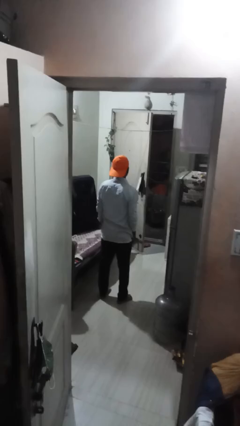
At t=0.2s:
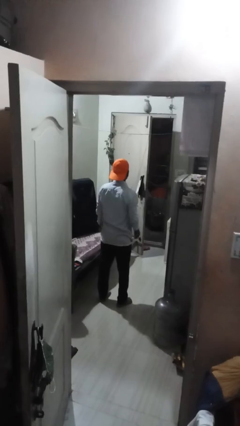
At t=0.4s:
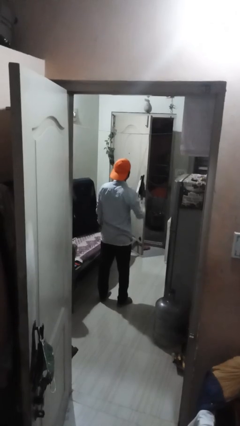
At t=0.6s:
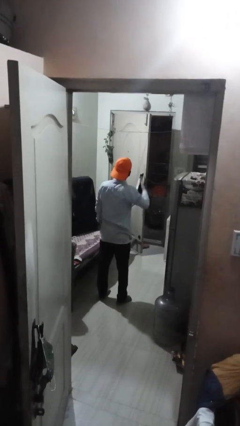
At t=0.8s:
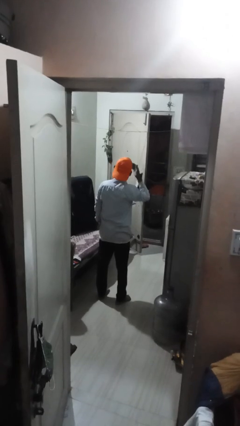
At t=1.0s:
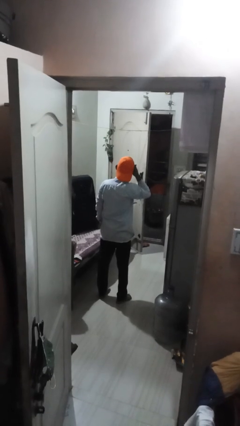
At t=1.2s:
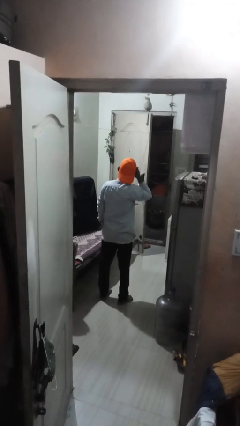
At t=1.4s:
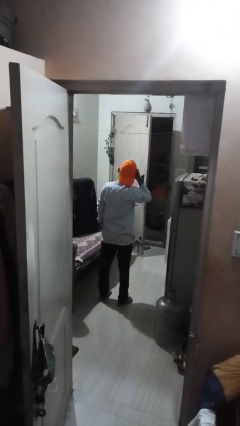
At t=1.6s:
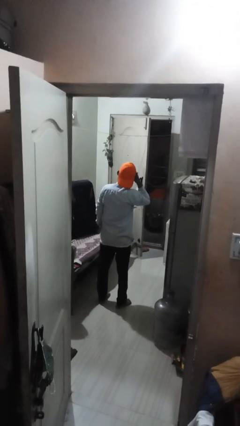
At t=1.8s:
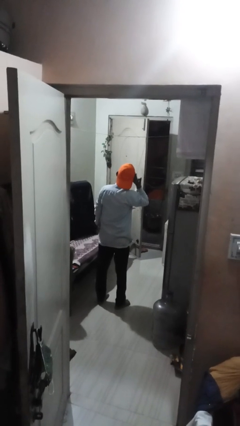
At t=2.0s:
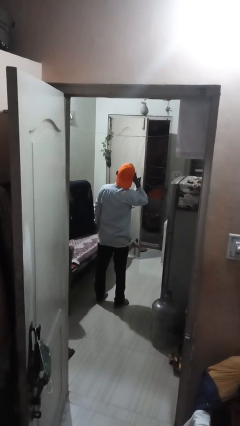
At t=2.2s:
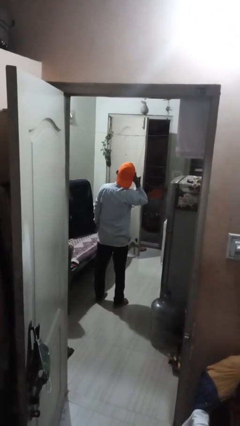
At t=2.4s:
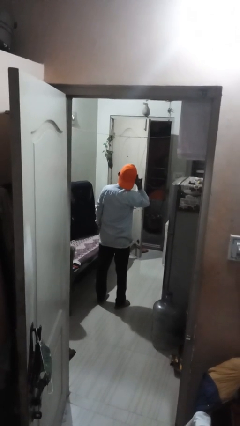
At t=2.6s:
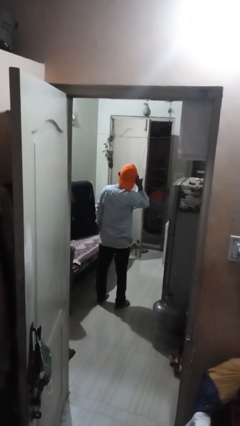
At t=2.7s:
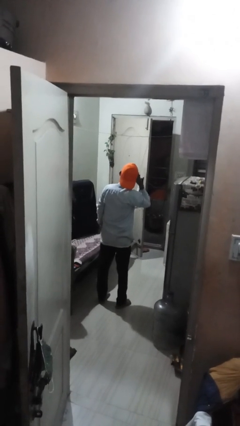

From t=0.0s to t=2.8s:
person covers face with hands

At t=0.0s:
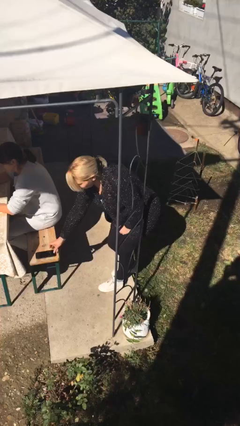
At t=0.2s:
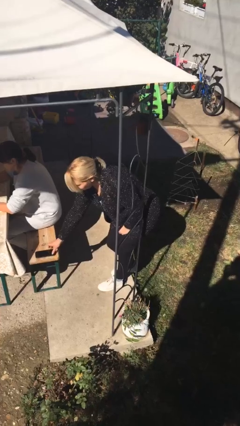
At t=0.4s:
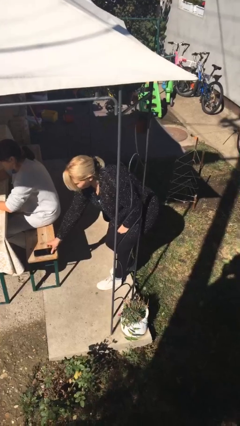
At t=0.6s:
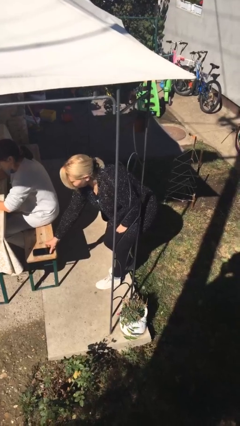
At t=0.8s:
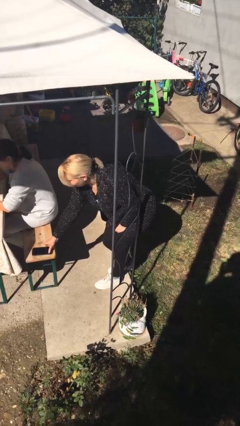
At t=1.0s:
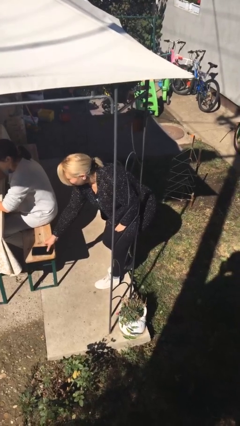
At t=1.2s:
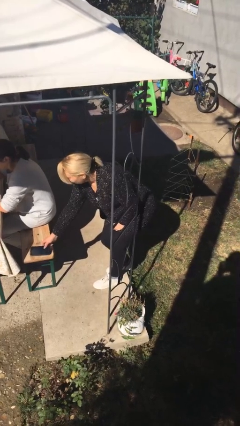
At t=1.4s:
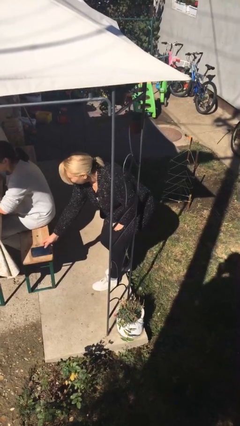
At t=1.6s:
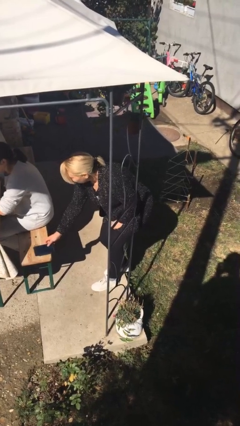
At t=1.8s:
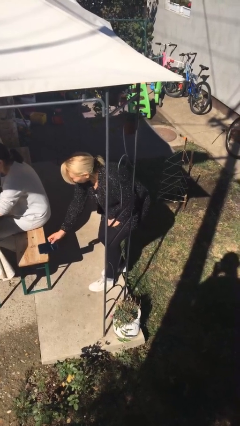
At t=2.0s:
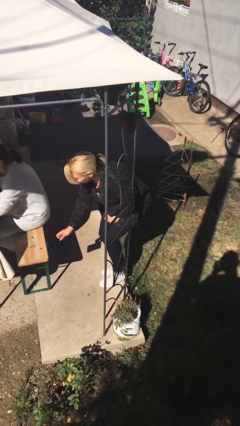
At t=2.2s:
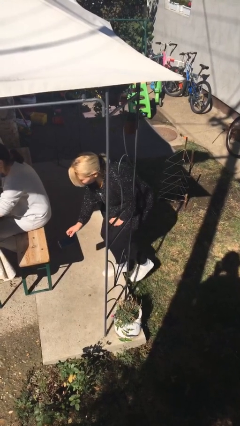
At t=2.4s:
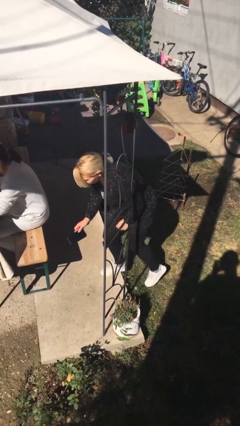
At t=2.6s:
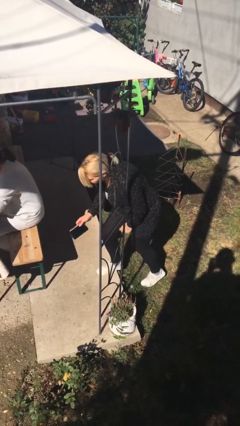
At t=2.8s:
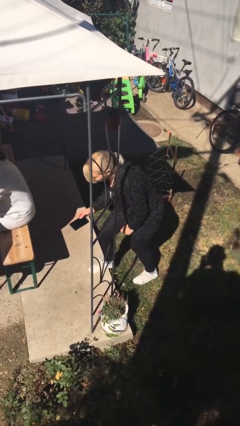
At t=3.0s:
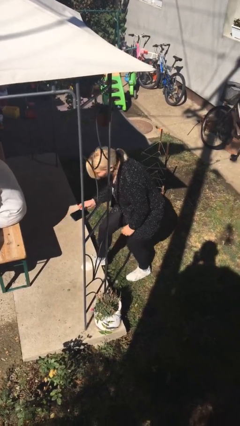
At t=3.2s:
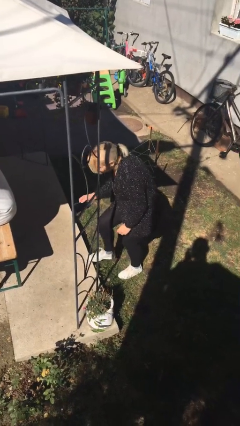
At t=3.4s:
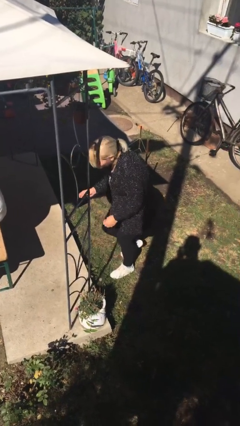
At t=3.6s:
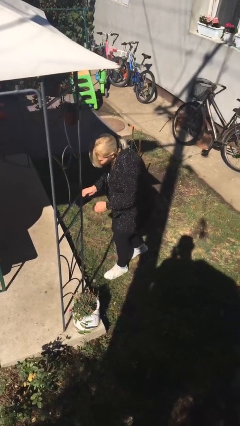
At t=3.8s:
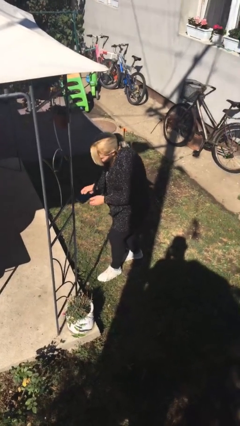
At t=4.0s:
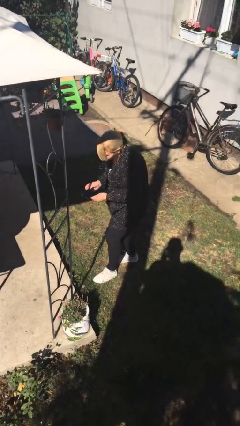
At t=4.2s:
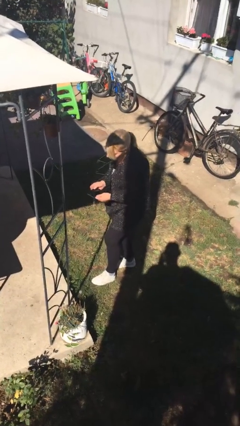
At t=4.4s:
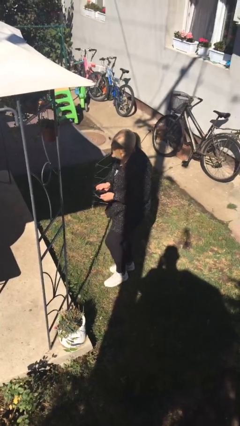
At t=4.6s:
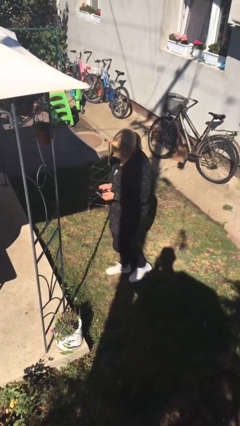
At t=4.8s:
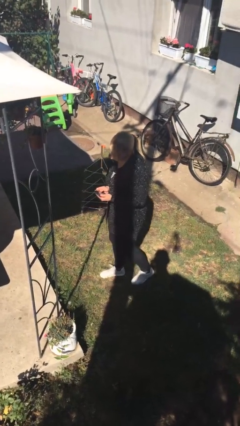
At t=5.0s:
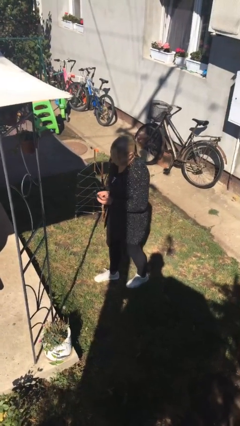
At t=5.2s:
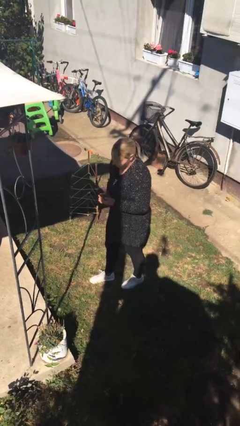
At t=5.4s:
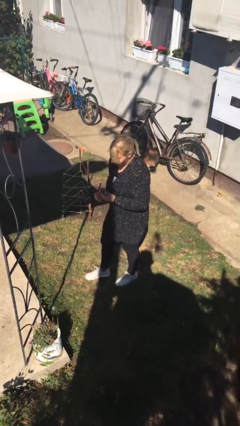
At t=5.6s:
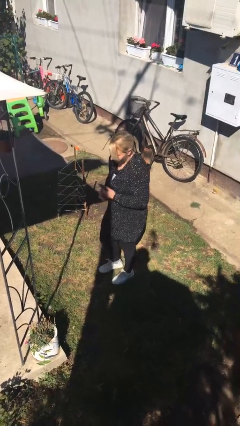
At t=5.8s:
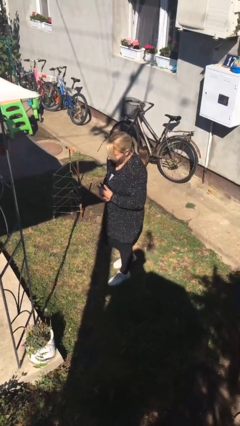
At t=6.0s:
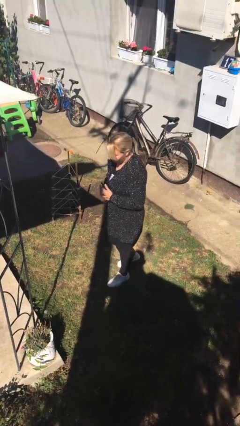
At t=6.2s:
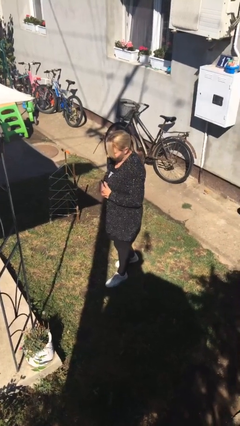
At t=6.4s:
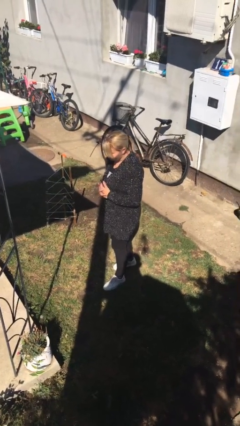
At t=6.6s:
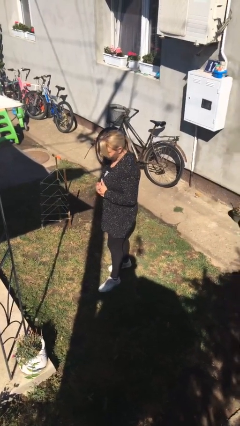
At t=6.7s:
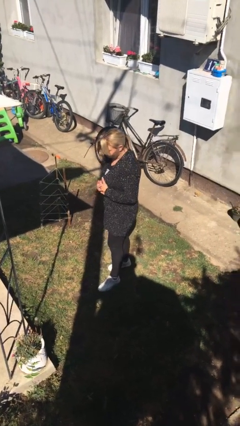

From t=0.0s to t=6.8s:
person steals object from person

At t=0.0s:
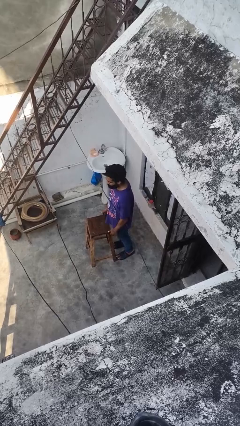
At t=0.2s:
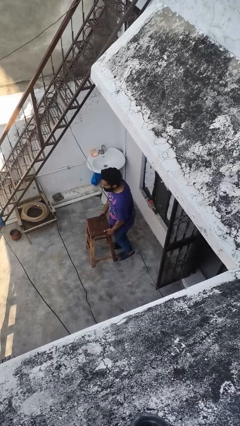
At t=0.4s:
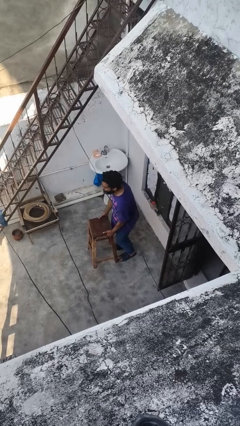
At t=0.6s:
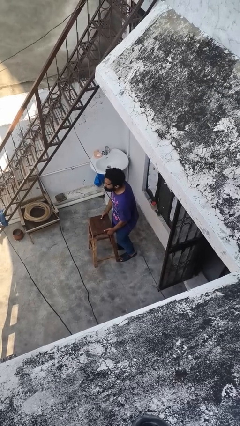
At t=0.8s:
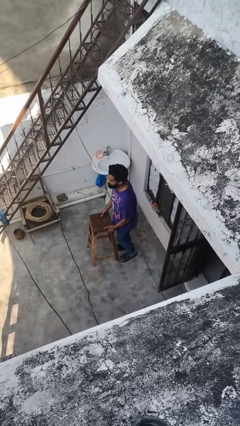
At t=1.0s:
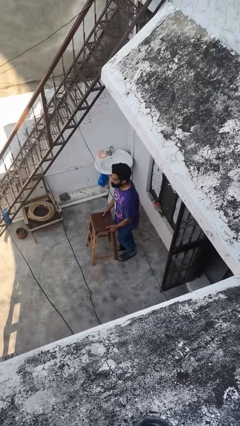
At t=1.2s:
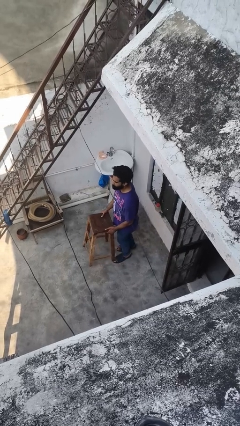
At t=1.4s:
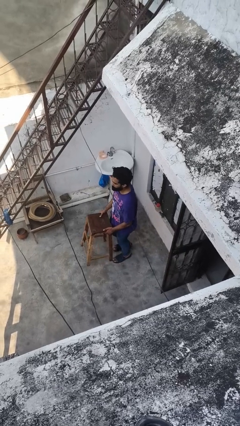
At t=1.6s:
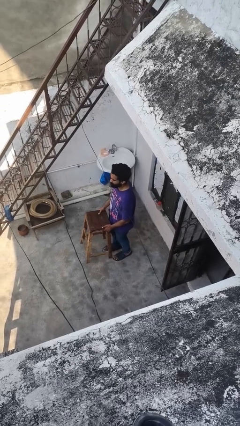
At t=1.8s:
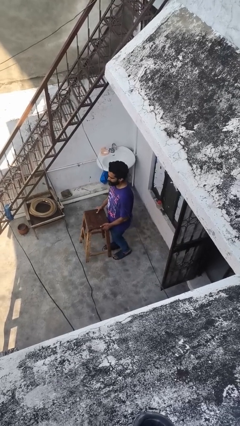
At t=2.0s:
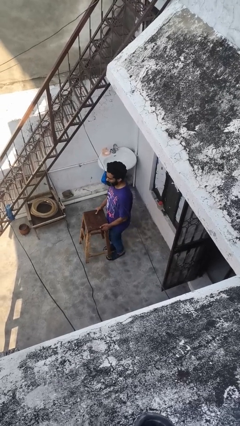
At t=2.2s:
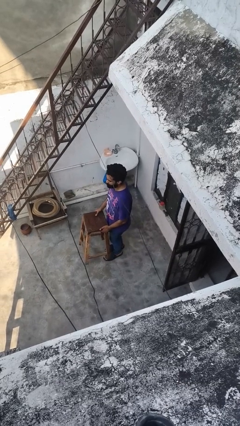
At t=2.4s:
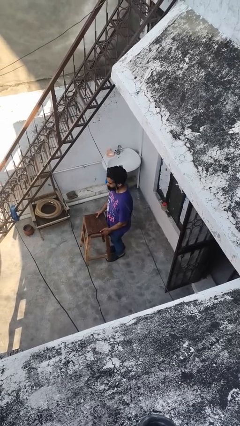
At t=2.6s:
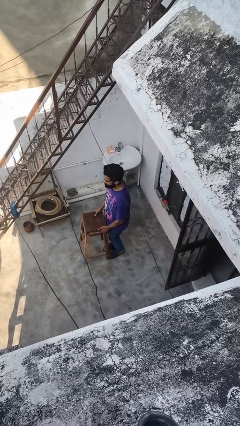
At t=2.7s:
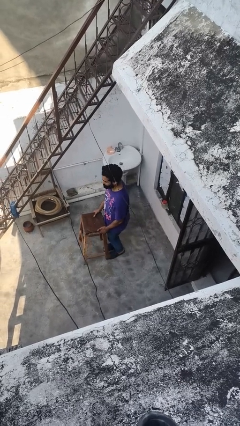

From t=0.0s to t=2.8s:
person carries furniture

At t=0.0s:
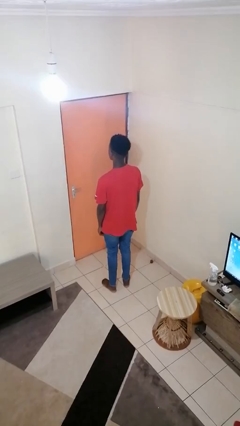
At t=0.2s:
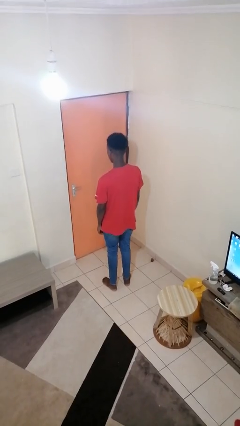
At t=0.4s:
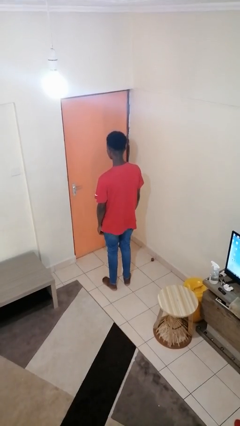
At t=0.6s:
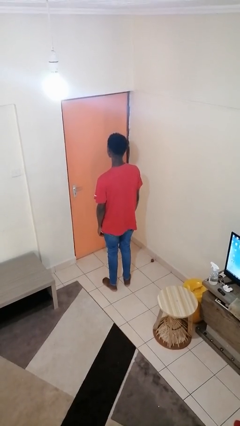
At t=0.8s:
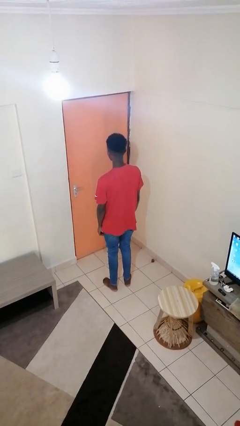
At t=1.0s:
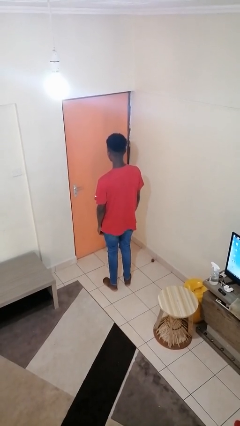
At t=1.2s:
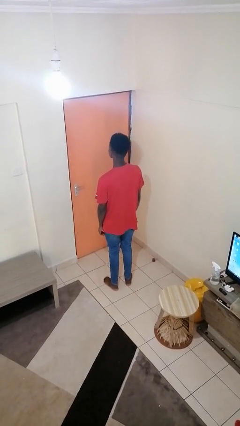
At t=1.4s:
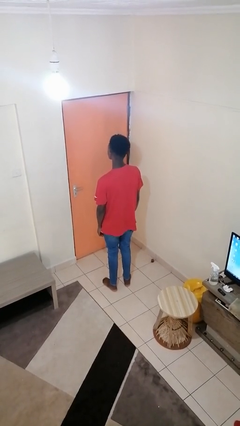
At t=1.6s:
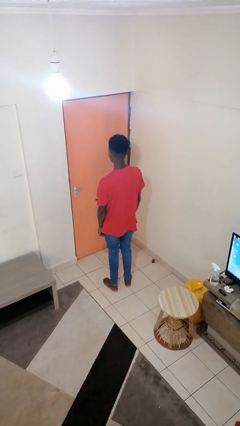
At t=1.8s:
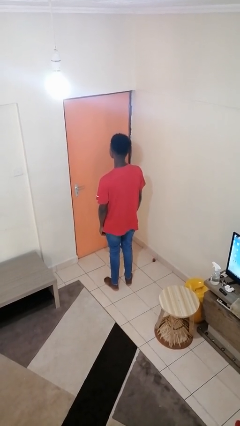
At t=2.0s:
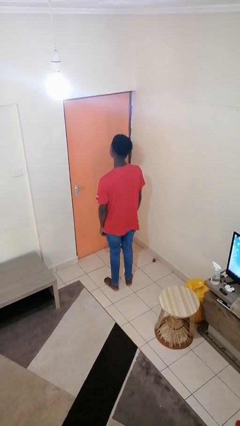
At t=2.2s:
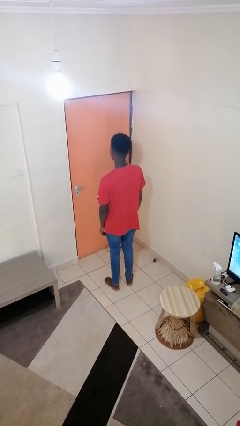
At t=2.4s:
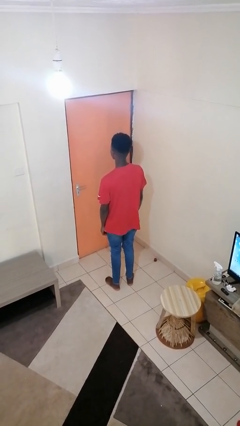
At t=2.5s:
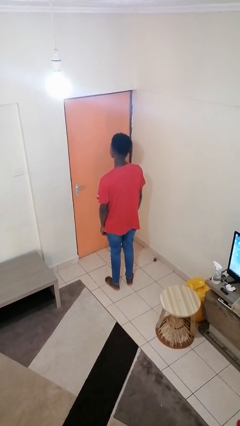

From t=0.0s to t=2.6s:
person nods head

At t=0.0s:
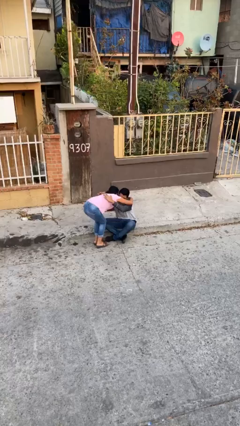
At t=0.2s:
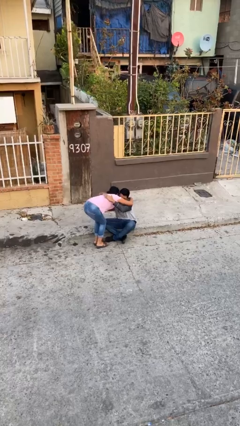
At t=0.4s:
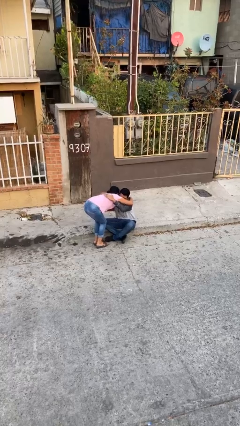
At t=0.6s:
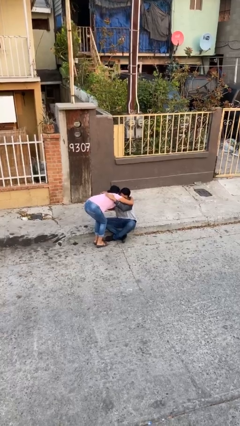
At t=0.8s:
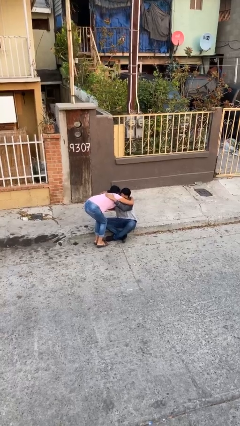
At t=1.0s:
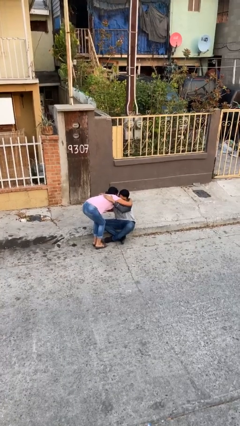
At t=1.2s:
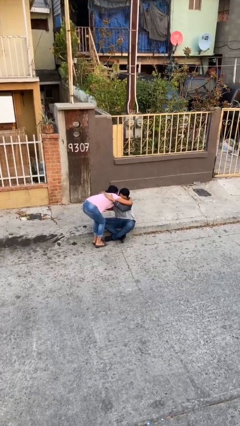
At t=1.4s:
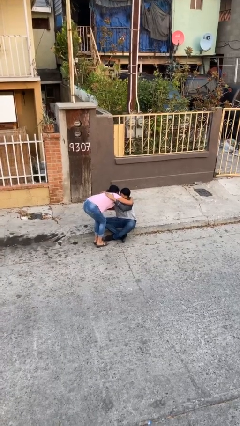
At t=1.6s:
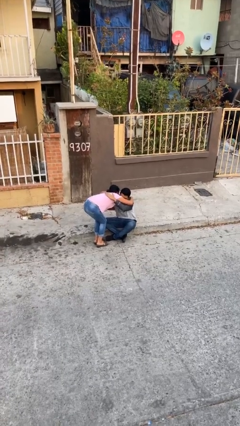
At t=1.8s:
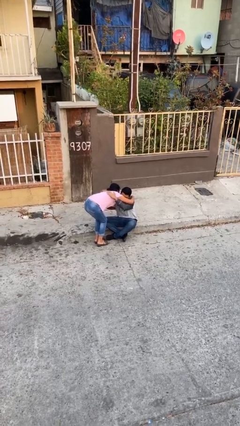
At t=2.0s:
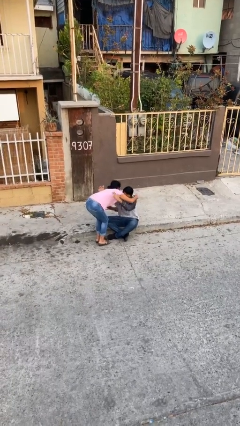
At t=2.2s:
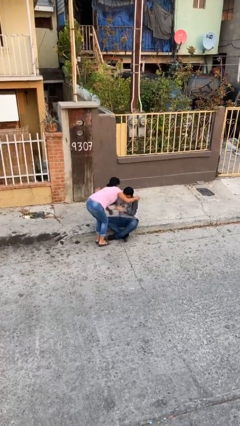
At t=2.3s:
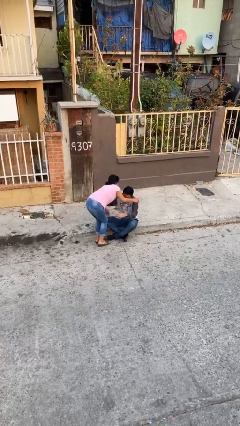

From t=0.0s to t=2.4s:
person embraces person

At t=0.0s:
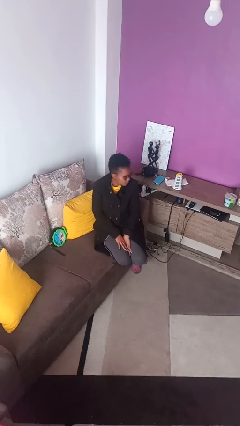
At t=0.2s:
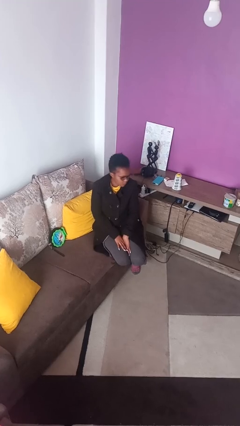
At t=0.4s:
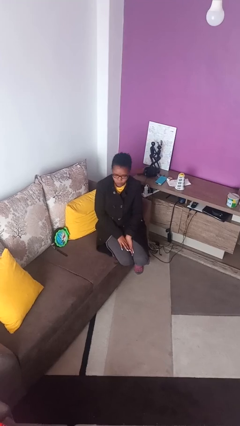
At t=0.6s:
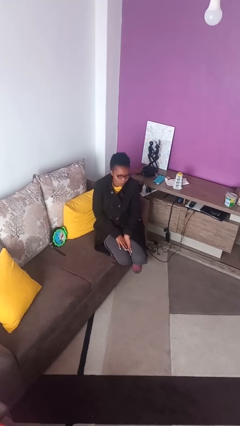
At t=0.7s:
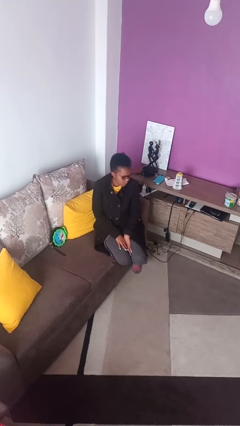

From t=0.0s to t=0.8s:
person shakes head
